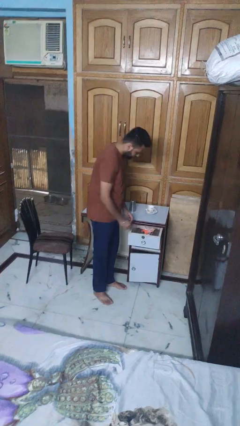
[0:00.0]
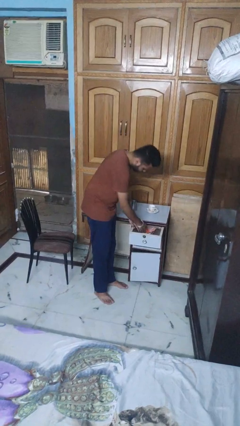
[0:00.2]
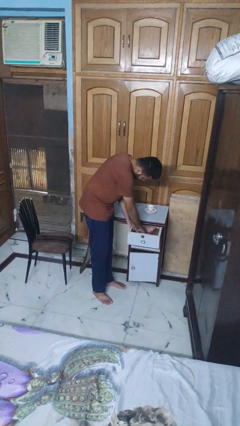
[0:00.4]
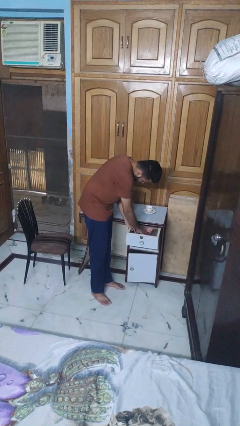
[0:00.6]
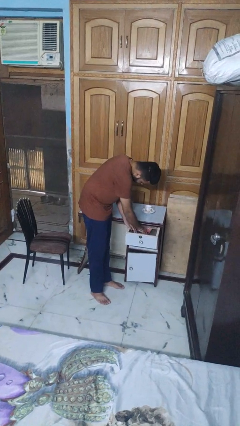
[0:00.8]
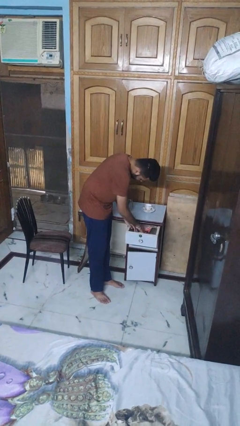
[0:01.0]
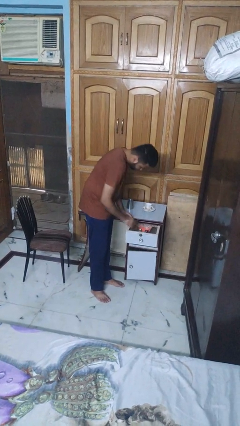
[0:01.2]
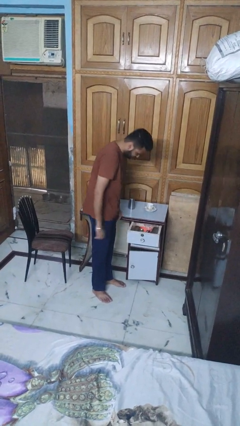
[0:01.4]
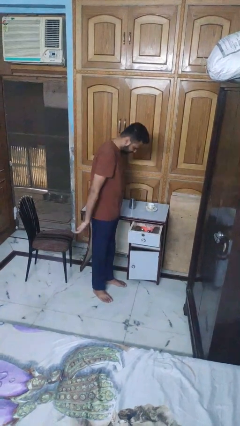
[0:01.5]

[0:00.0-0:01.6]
person searches in kitchen drawer

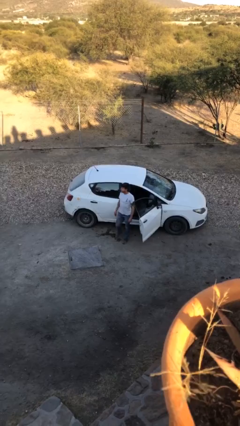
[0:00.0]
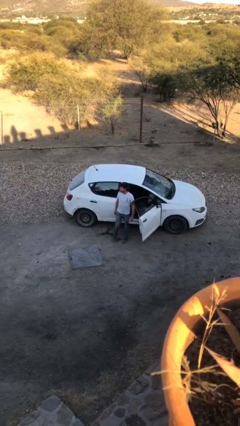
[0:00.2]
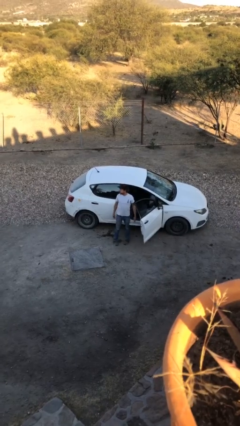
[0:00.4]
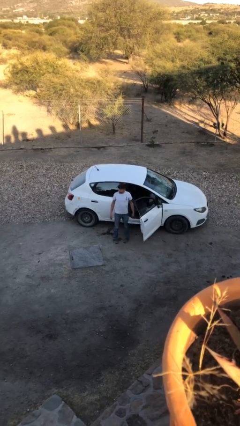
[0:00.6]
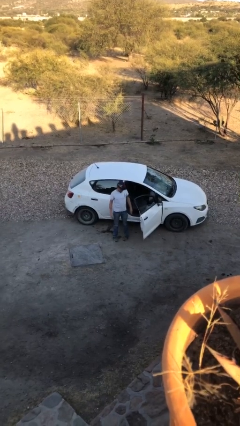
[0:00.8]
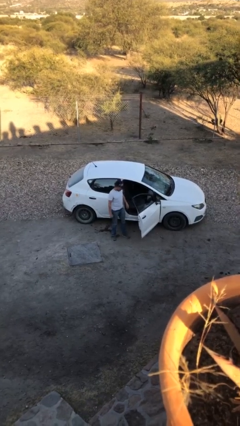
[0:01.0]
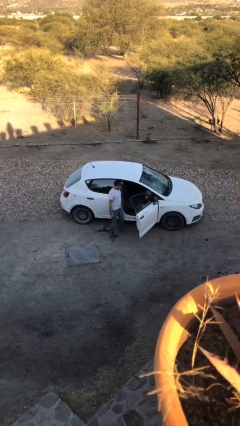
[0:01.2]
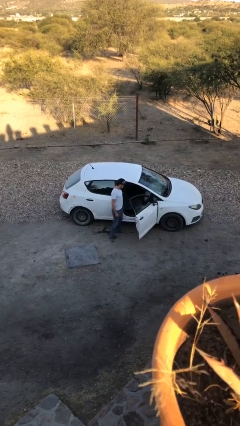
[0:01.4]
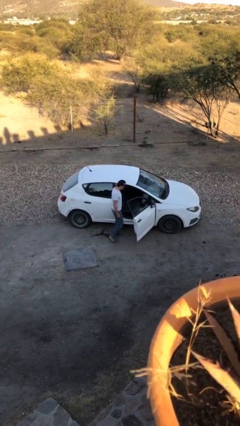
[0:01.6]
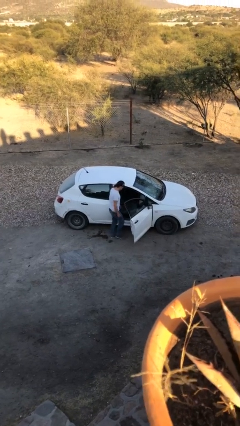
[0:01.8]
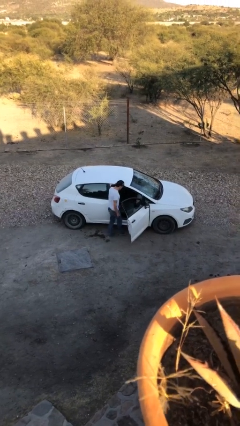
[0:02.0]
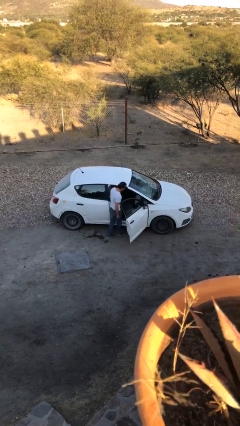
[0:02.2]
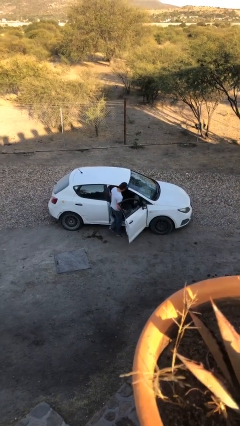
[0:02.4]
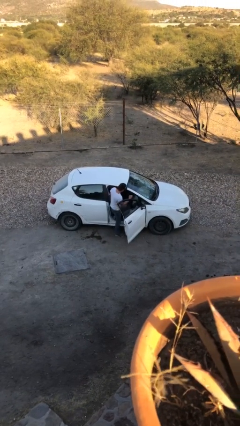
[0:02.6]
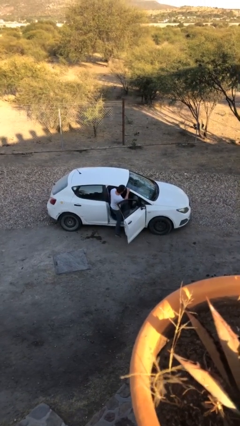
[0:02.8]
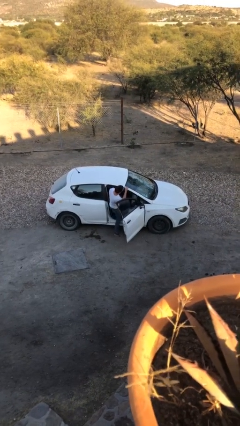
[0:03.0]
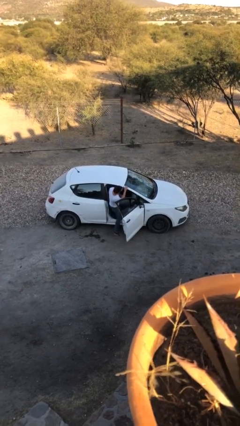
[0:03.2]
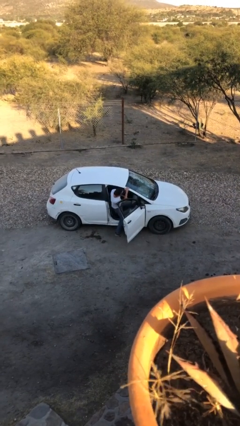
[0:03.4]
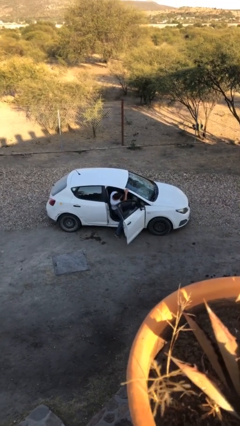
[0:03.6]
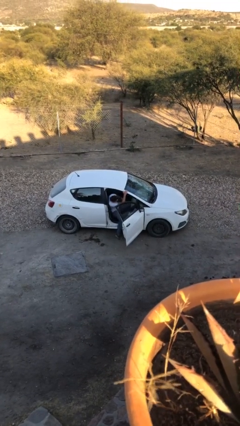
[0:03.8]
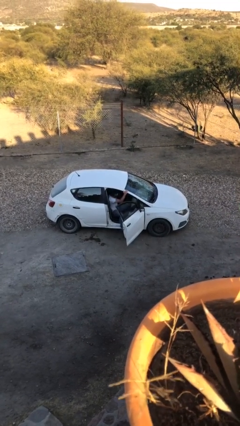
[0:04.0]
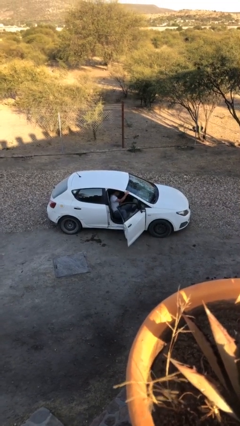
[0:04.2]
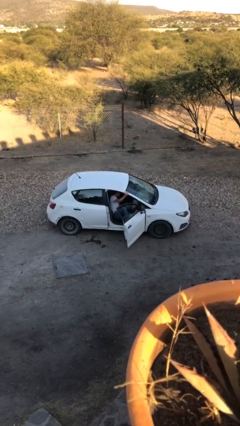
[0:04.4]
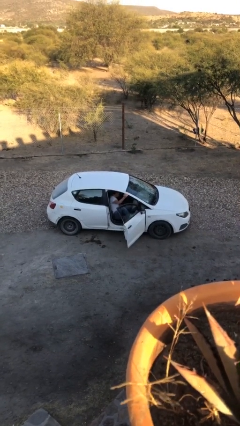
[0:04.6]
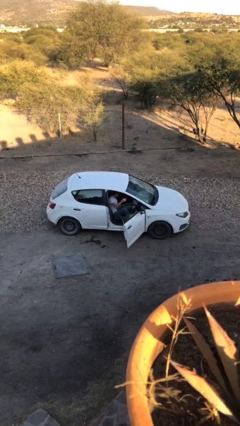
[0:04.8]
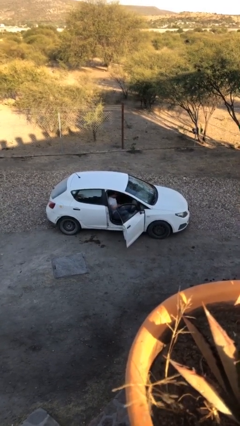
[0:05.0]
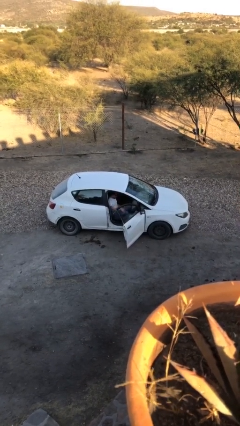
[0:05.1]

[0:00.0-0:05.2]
person enters car

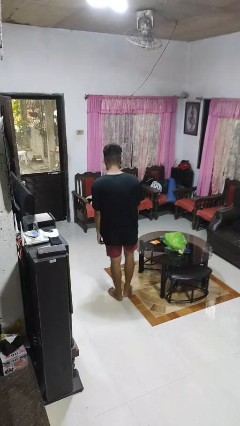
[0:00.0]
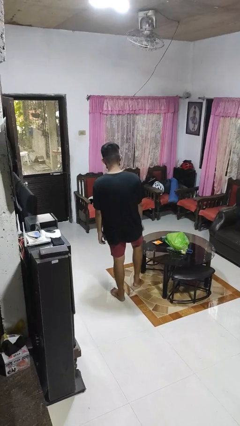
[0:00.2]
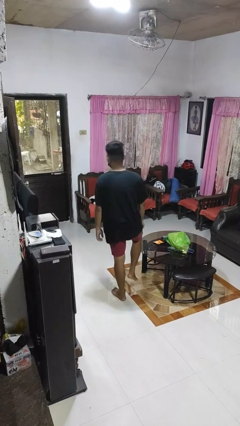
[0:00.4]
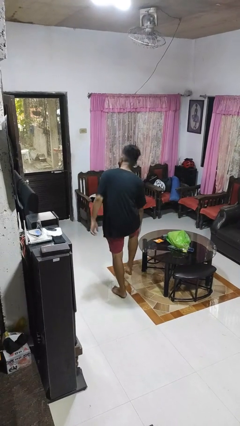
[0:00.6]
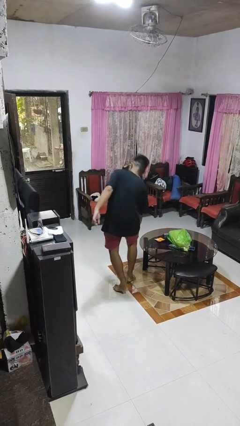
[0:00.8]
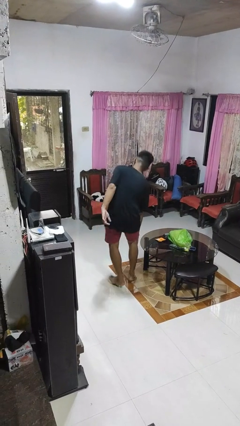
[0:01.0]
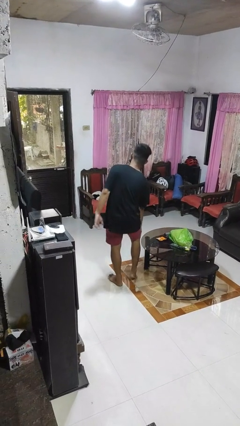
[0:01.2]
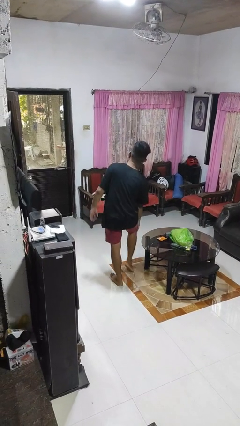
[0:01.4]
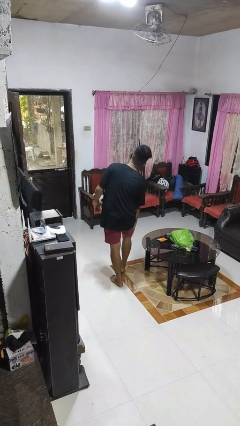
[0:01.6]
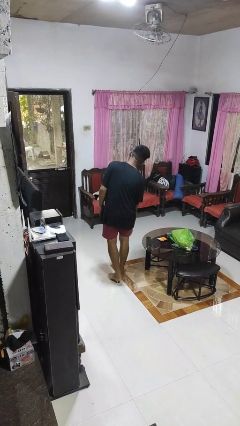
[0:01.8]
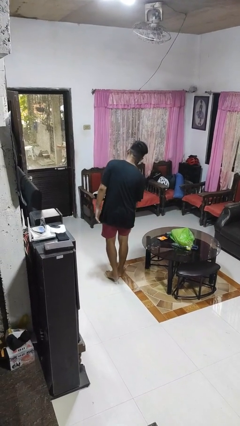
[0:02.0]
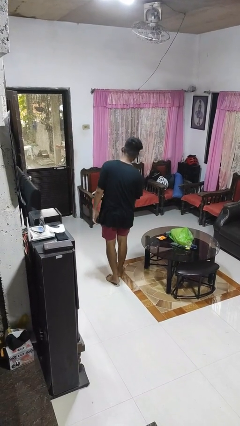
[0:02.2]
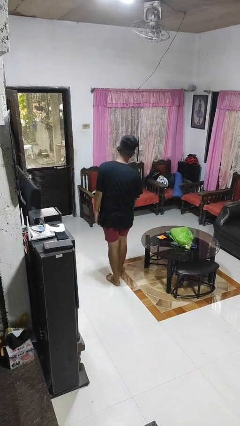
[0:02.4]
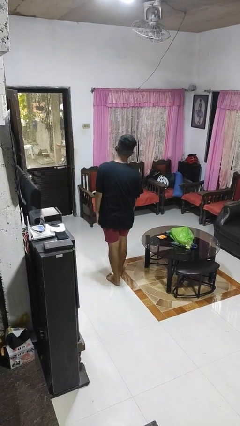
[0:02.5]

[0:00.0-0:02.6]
person bumps into table

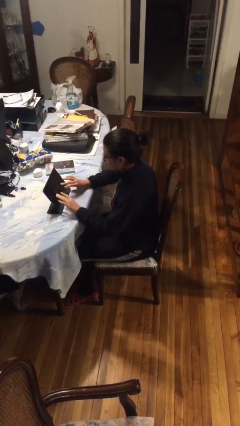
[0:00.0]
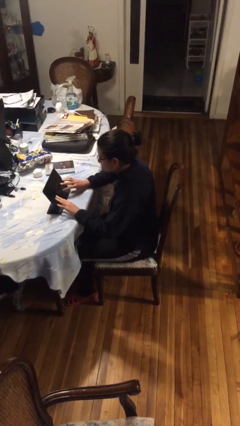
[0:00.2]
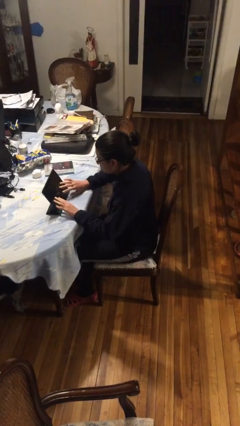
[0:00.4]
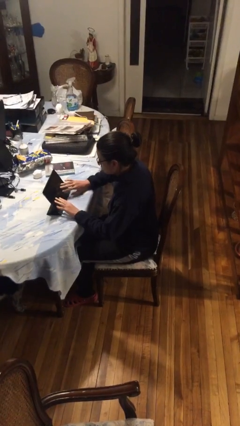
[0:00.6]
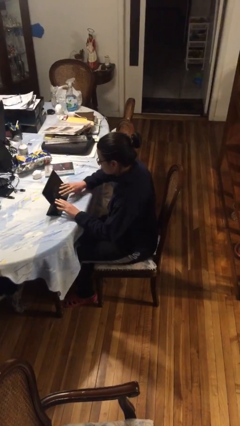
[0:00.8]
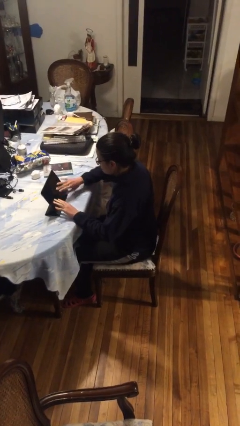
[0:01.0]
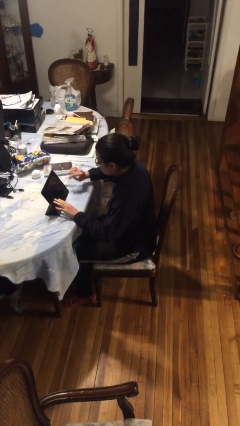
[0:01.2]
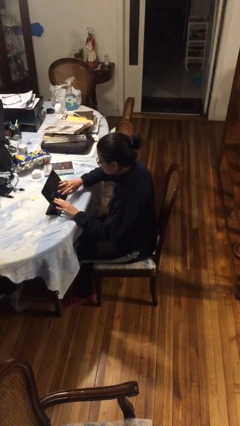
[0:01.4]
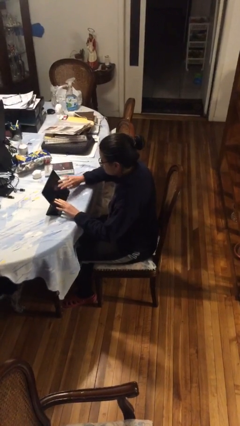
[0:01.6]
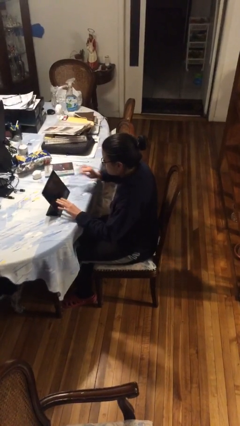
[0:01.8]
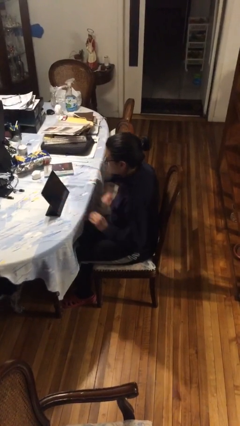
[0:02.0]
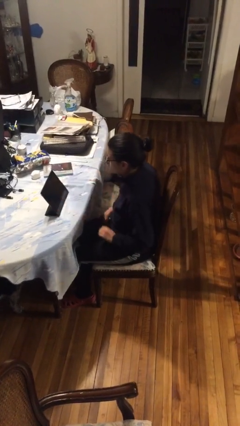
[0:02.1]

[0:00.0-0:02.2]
person interacts with tablet

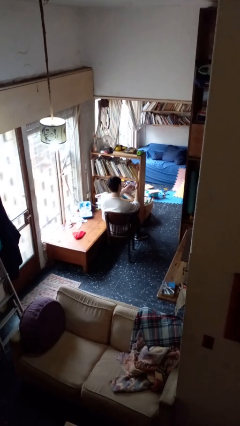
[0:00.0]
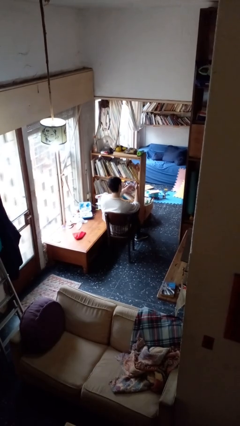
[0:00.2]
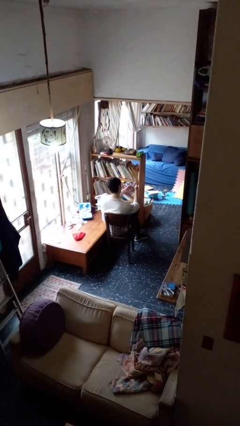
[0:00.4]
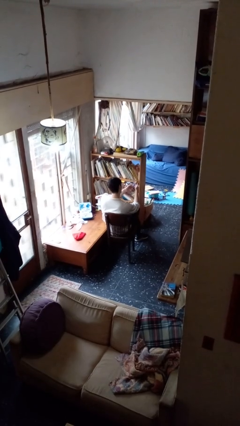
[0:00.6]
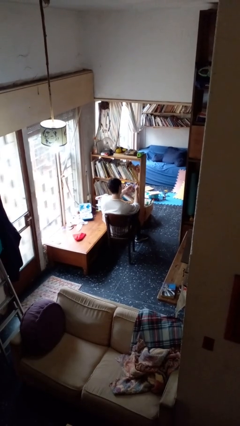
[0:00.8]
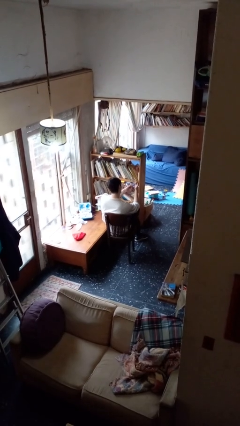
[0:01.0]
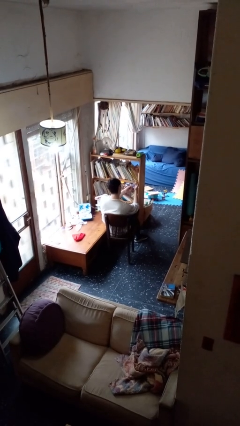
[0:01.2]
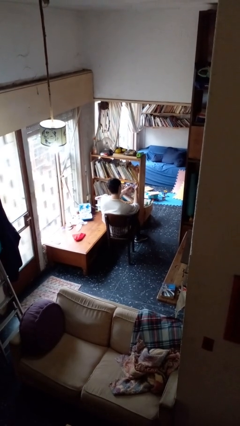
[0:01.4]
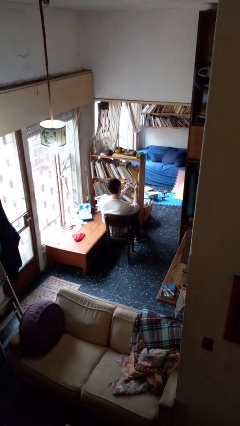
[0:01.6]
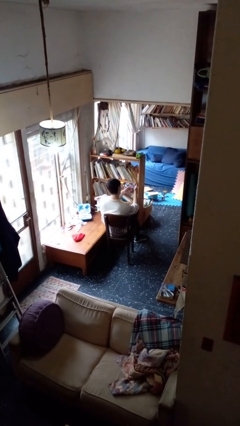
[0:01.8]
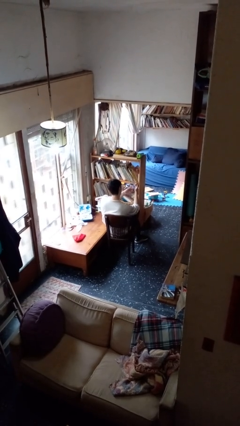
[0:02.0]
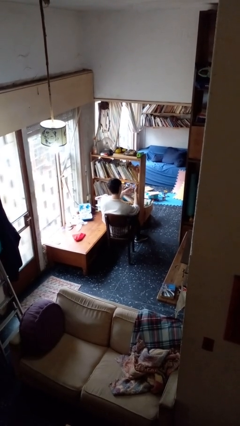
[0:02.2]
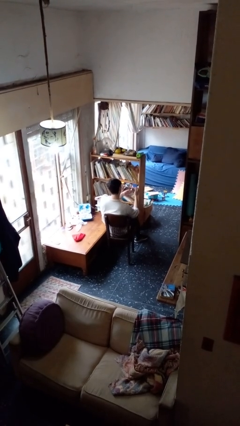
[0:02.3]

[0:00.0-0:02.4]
person clips fingernails

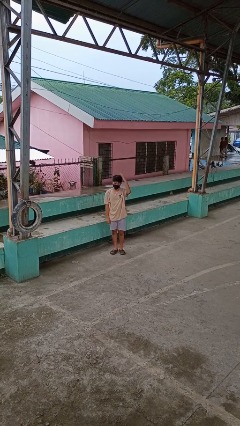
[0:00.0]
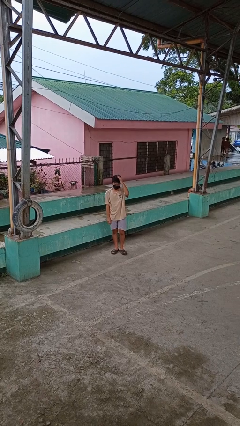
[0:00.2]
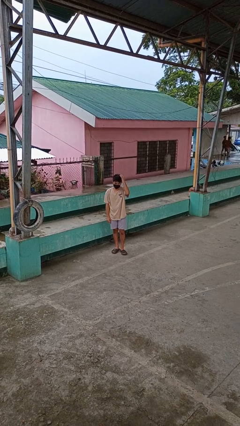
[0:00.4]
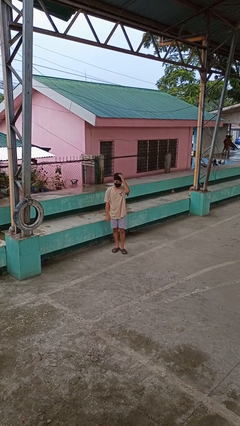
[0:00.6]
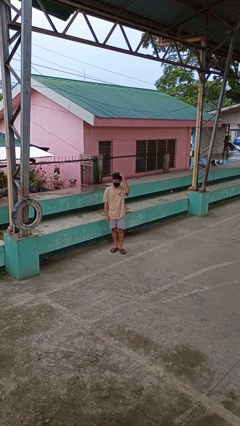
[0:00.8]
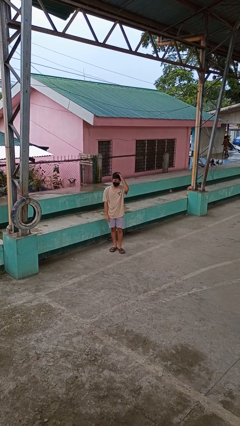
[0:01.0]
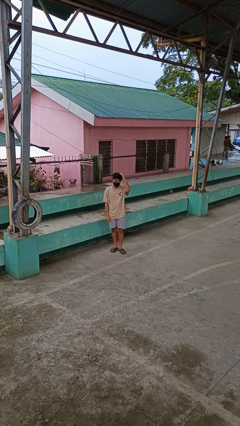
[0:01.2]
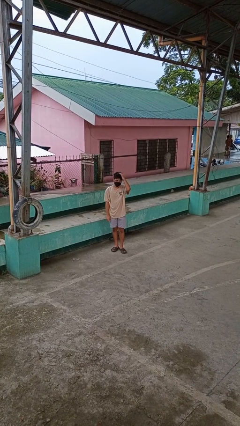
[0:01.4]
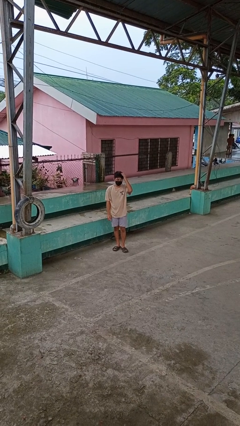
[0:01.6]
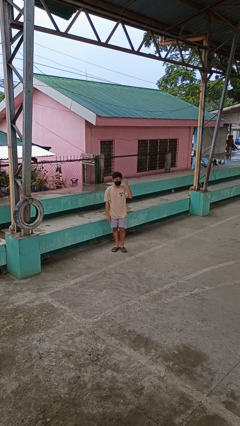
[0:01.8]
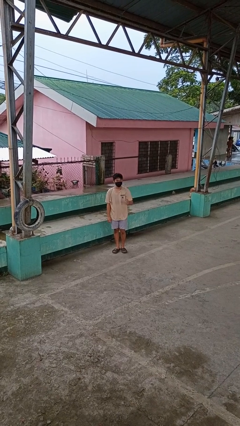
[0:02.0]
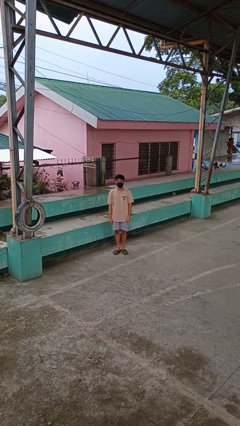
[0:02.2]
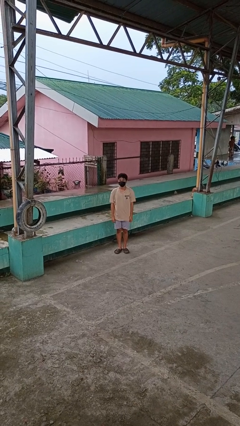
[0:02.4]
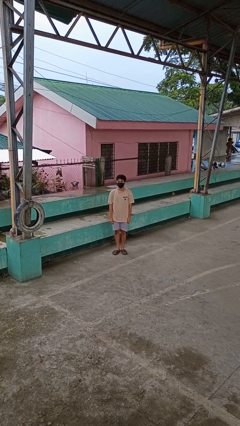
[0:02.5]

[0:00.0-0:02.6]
person pats head

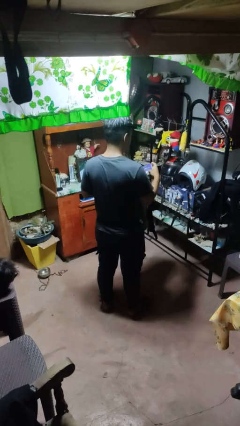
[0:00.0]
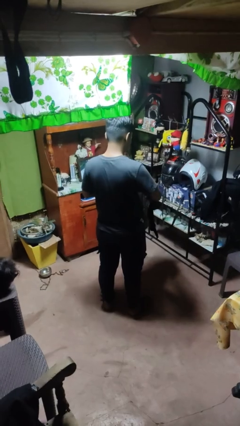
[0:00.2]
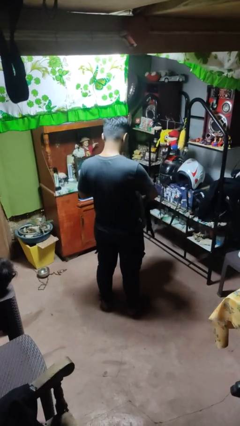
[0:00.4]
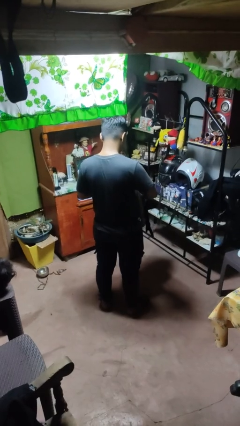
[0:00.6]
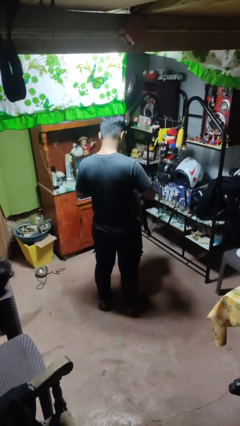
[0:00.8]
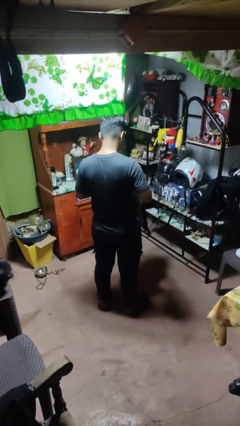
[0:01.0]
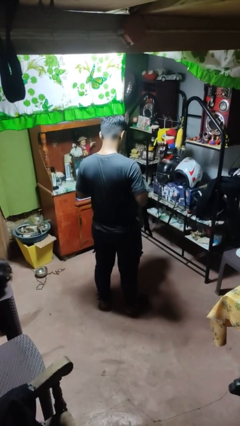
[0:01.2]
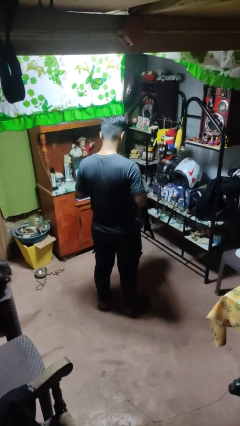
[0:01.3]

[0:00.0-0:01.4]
person puts object into bag
